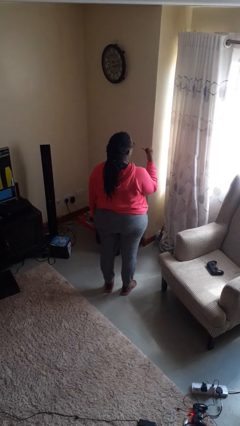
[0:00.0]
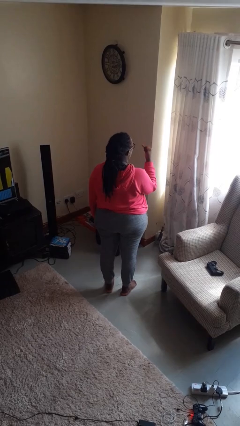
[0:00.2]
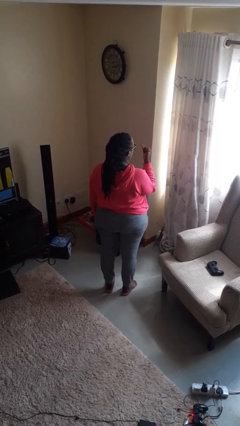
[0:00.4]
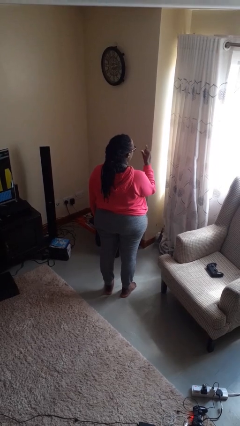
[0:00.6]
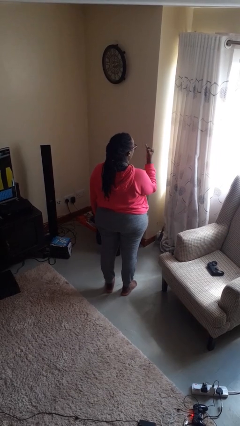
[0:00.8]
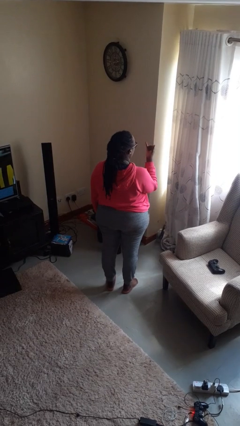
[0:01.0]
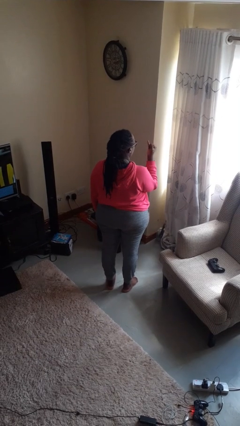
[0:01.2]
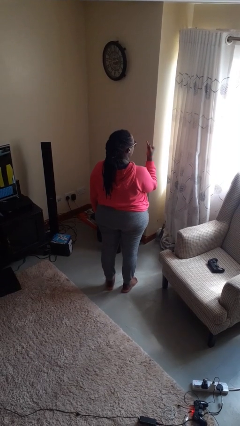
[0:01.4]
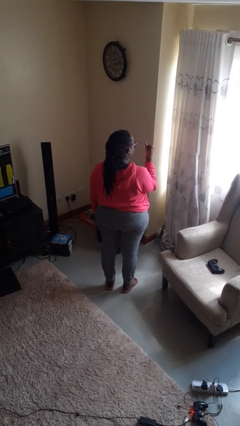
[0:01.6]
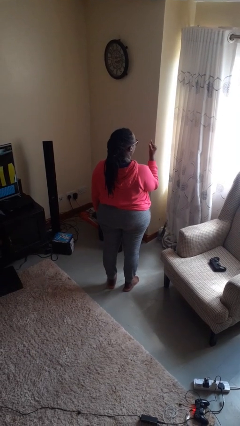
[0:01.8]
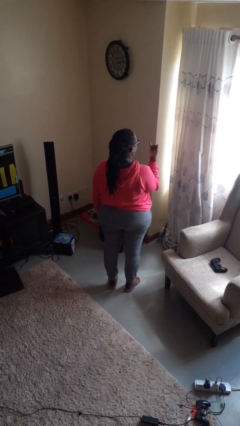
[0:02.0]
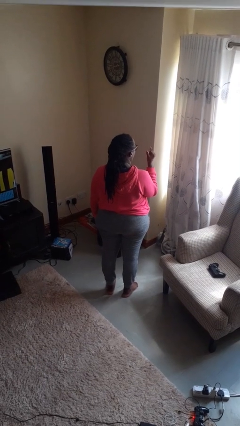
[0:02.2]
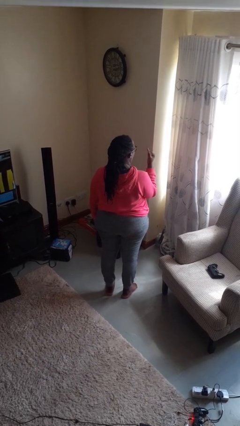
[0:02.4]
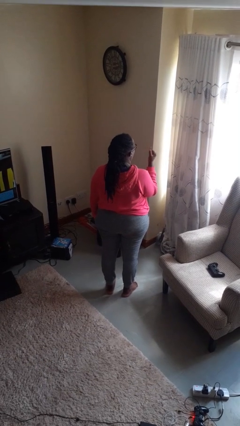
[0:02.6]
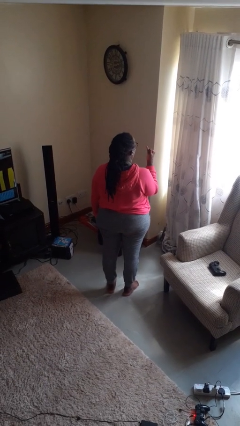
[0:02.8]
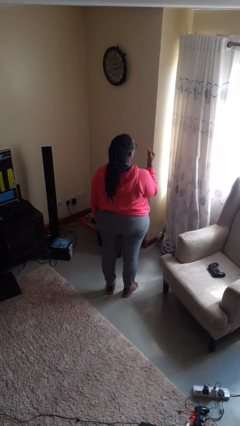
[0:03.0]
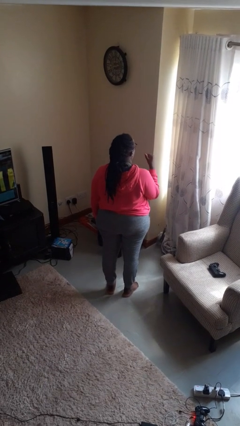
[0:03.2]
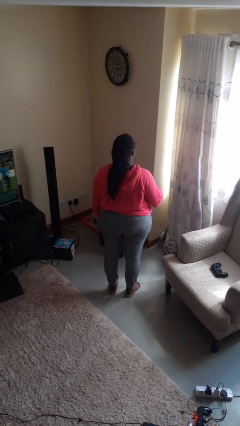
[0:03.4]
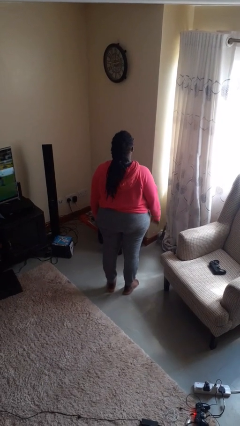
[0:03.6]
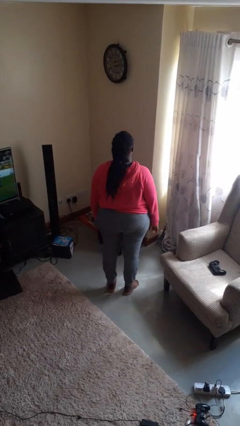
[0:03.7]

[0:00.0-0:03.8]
person gestures hang loose

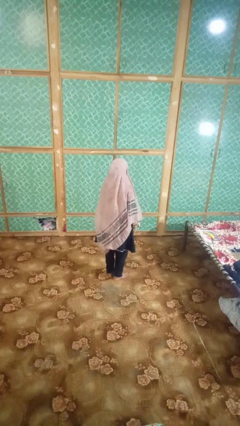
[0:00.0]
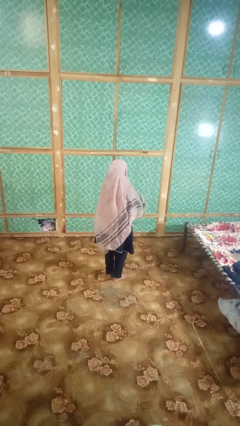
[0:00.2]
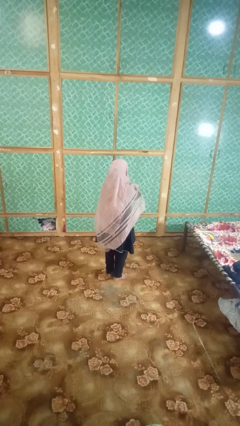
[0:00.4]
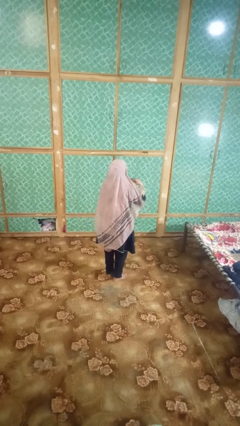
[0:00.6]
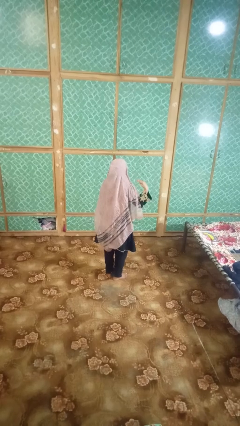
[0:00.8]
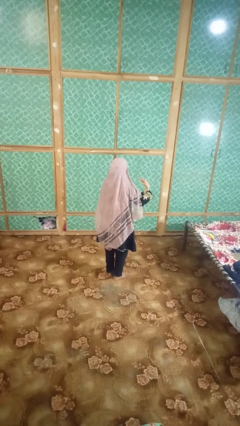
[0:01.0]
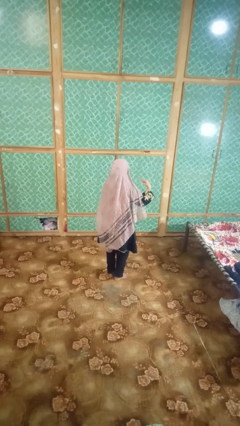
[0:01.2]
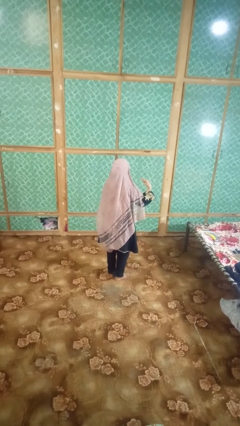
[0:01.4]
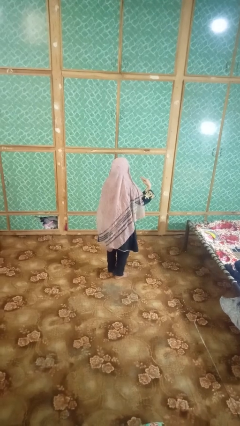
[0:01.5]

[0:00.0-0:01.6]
person gestures cut

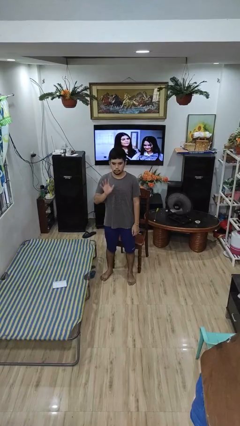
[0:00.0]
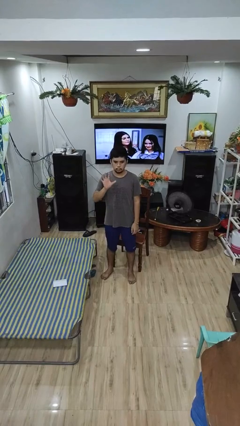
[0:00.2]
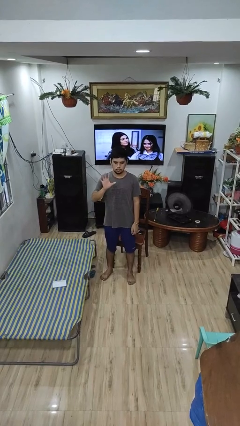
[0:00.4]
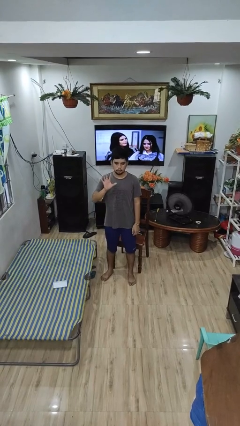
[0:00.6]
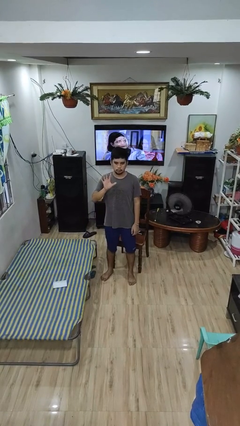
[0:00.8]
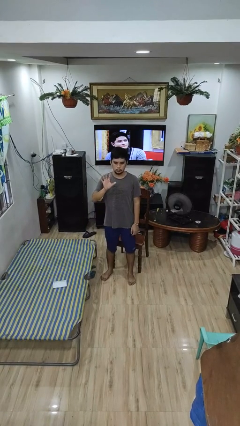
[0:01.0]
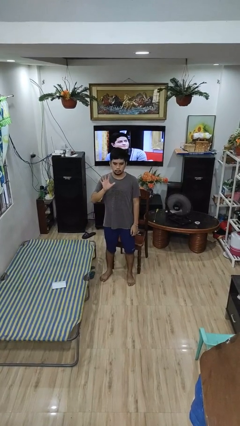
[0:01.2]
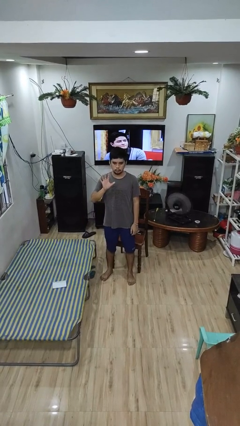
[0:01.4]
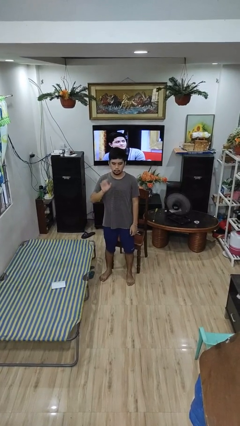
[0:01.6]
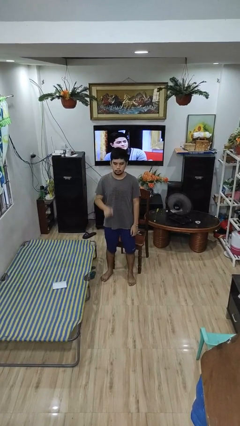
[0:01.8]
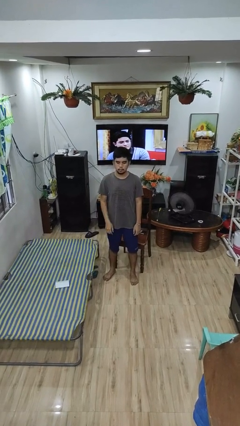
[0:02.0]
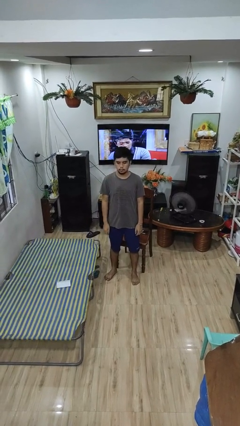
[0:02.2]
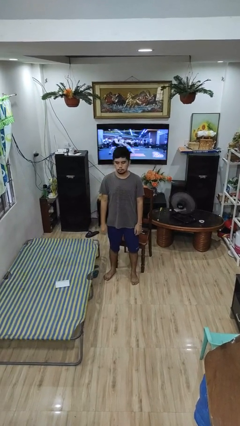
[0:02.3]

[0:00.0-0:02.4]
person gestures number five

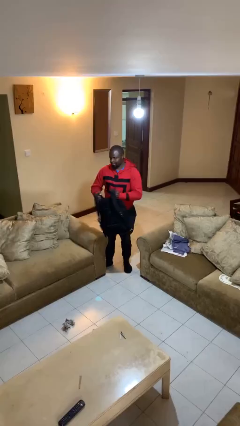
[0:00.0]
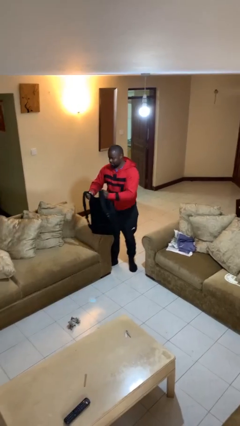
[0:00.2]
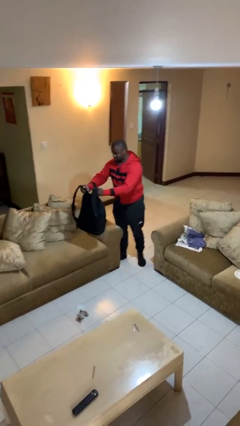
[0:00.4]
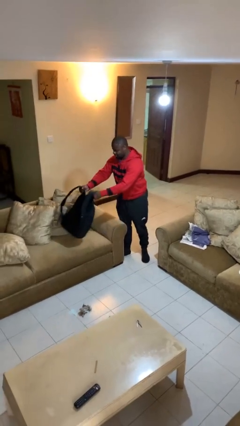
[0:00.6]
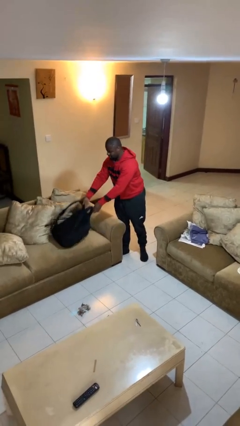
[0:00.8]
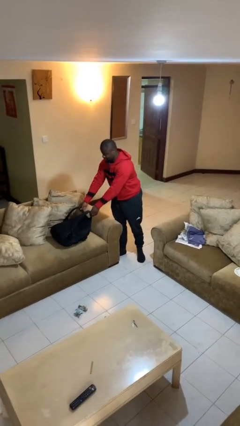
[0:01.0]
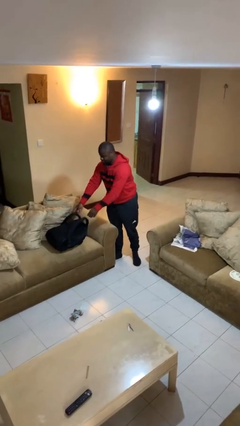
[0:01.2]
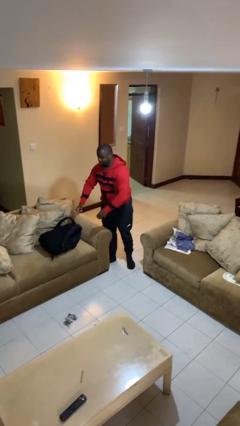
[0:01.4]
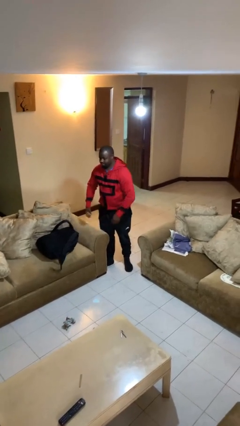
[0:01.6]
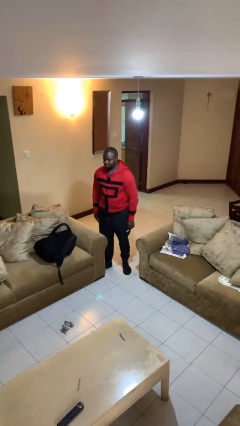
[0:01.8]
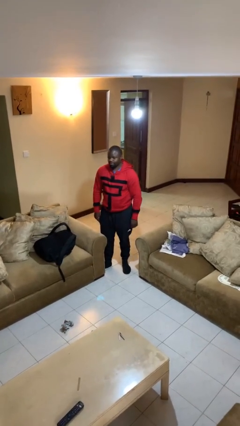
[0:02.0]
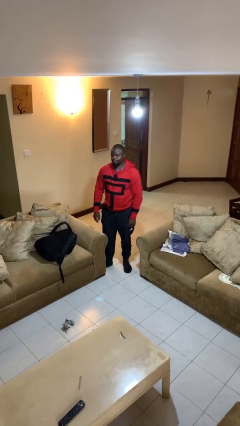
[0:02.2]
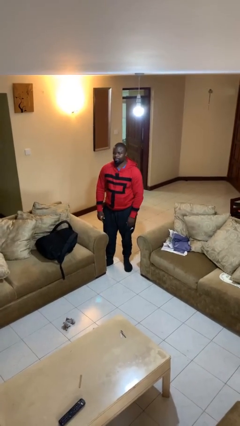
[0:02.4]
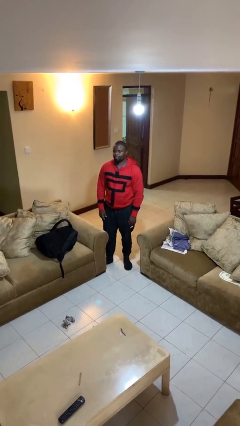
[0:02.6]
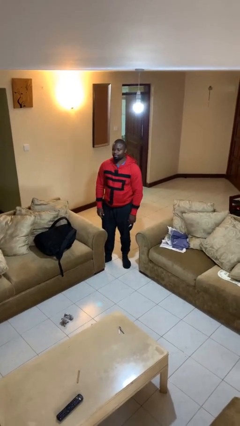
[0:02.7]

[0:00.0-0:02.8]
person puts down object on couch

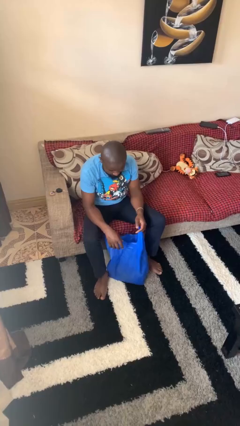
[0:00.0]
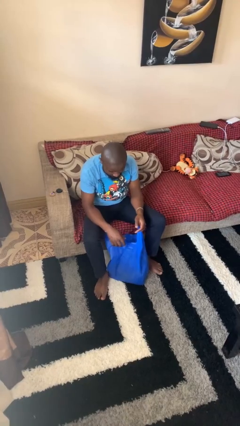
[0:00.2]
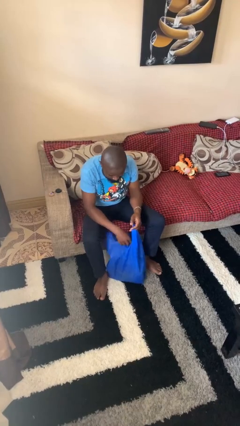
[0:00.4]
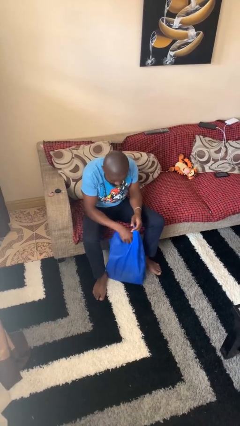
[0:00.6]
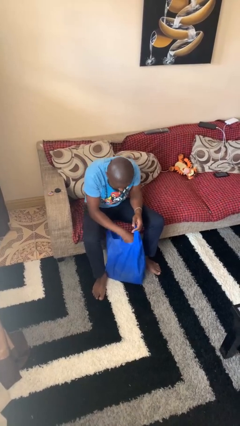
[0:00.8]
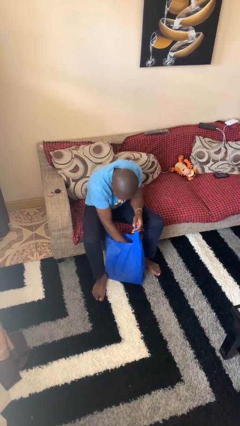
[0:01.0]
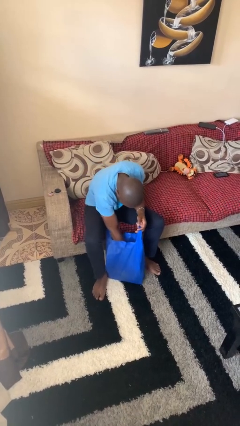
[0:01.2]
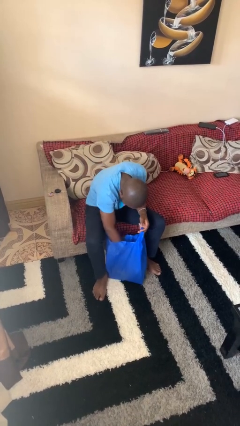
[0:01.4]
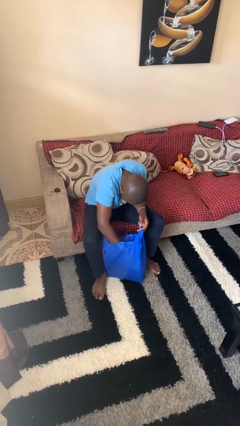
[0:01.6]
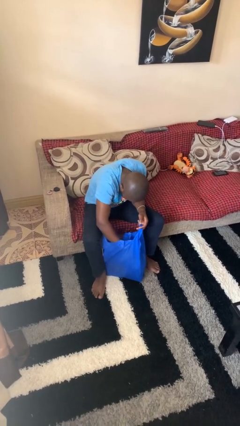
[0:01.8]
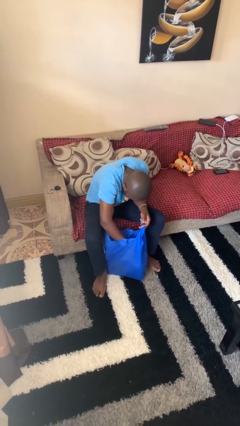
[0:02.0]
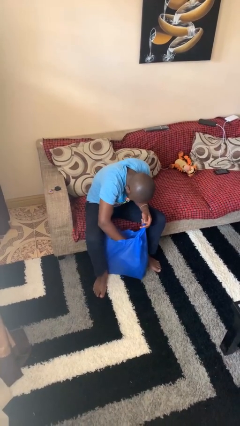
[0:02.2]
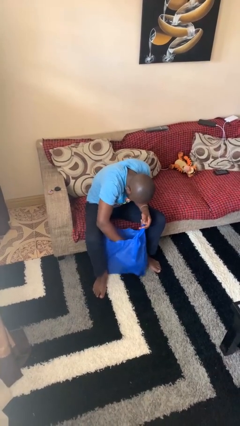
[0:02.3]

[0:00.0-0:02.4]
person searches in bag

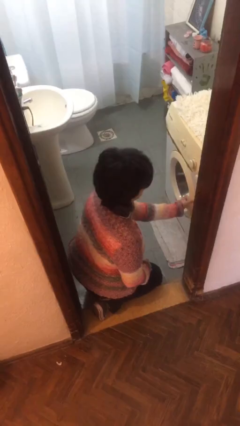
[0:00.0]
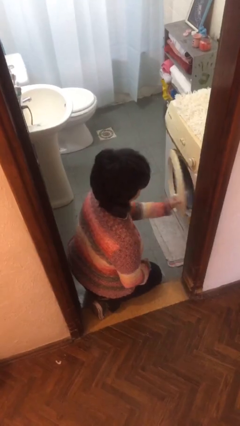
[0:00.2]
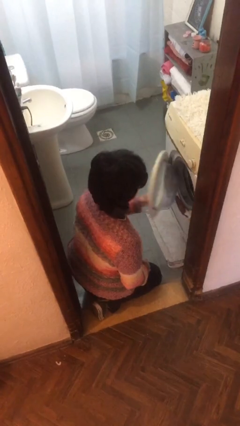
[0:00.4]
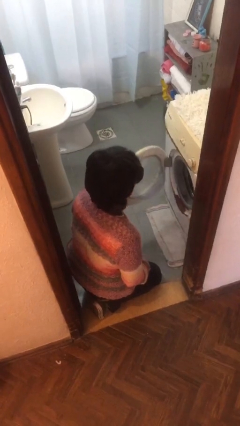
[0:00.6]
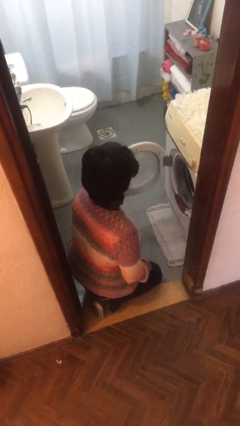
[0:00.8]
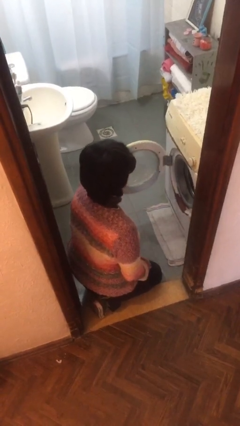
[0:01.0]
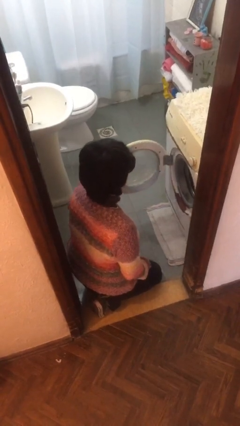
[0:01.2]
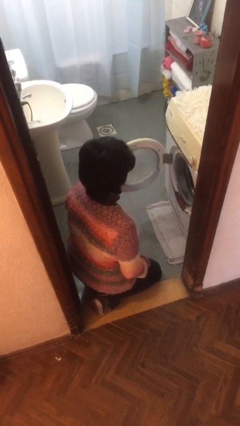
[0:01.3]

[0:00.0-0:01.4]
person opens clothes washer

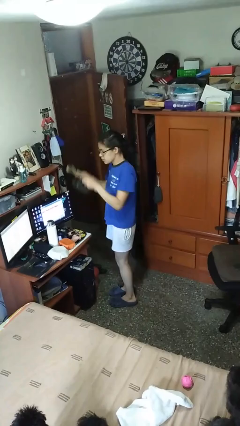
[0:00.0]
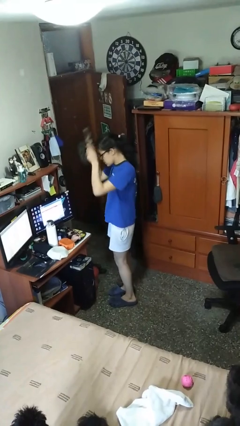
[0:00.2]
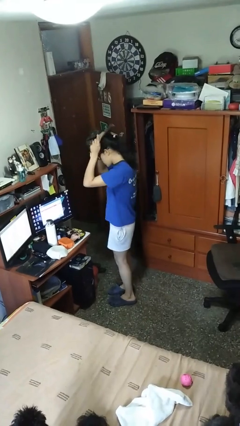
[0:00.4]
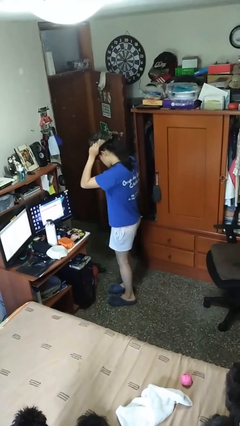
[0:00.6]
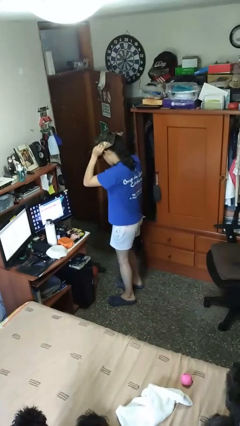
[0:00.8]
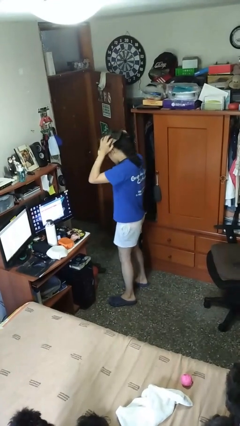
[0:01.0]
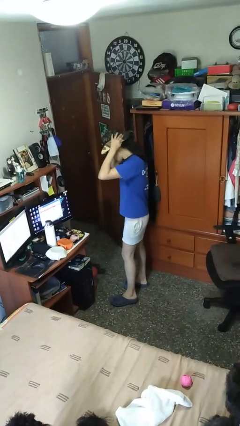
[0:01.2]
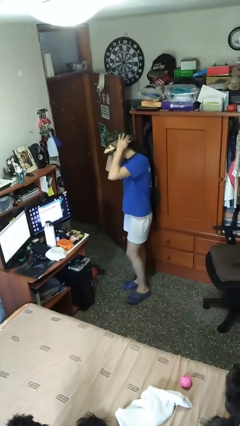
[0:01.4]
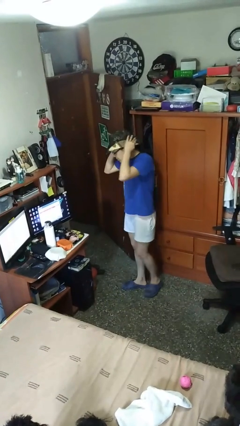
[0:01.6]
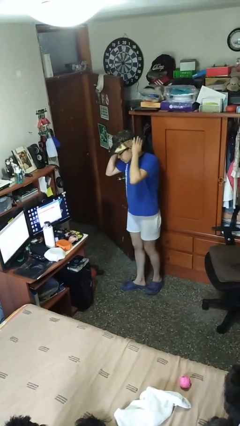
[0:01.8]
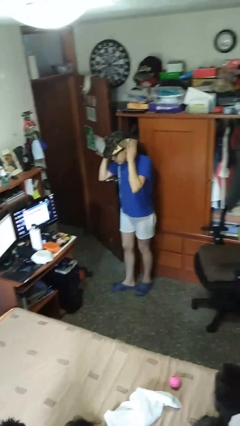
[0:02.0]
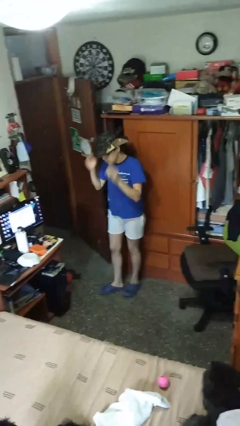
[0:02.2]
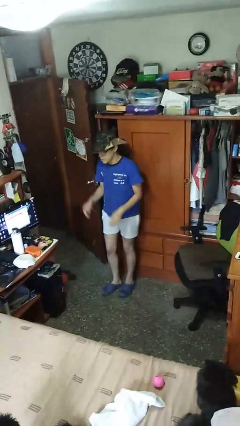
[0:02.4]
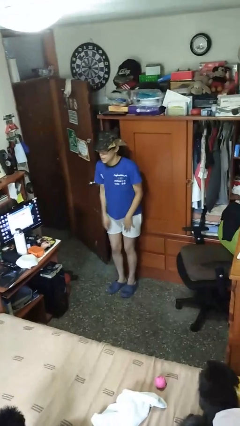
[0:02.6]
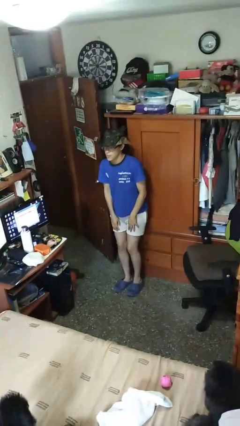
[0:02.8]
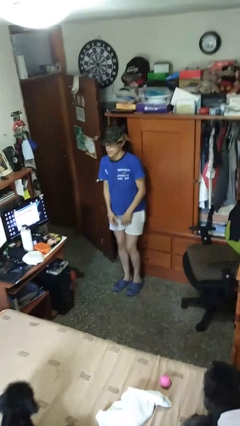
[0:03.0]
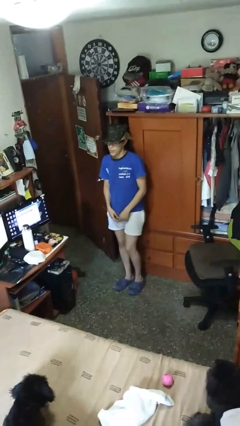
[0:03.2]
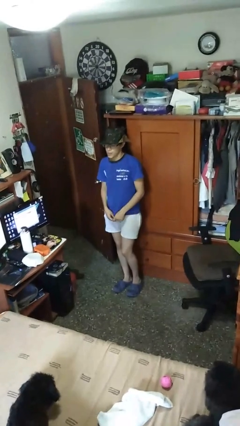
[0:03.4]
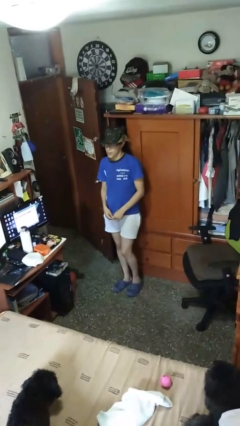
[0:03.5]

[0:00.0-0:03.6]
person puts on hat
